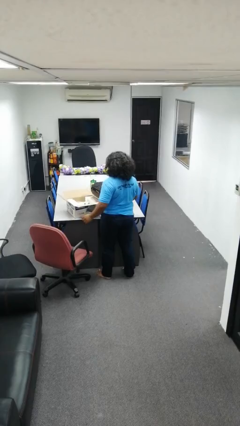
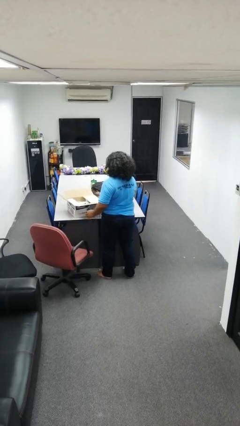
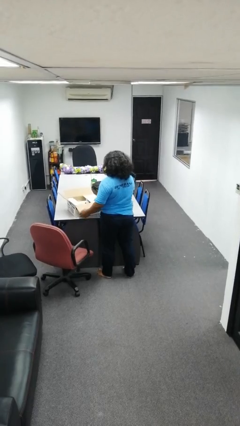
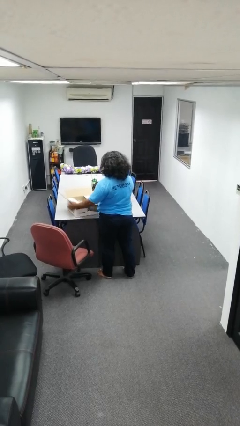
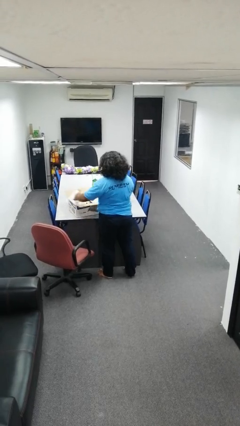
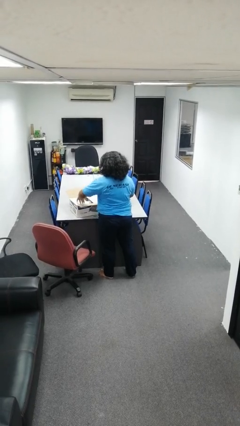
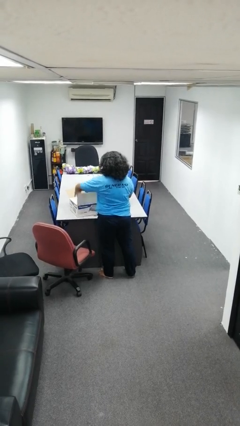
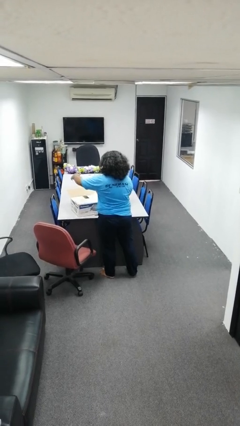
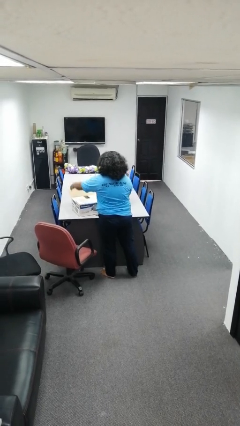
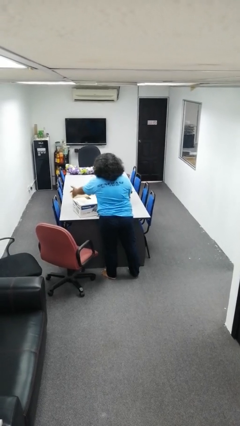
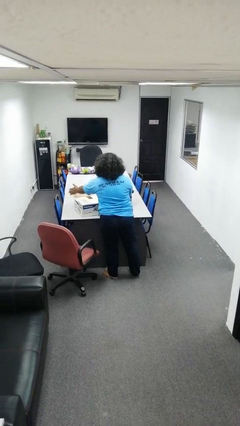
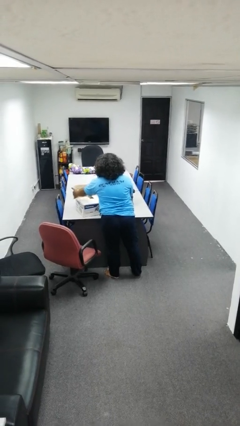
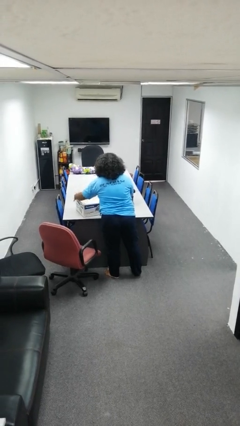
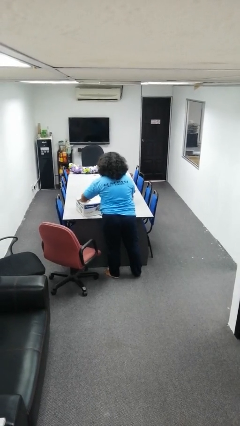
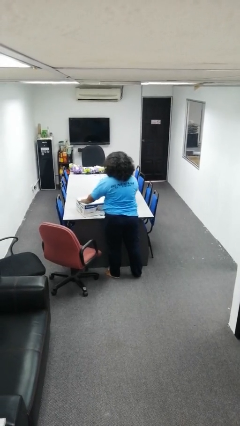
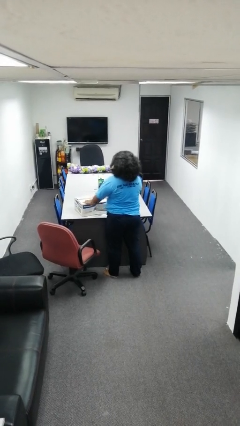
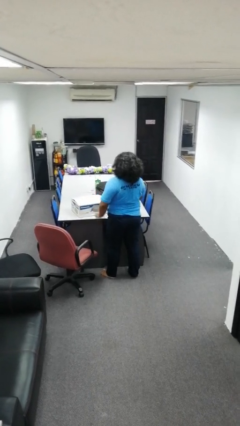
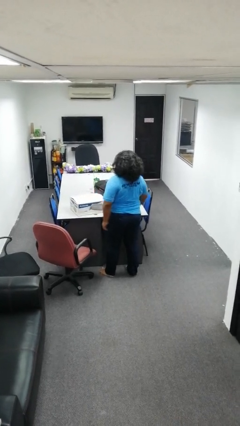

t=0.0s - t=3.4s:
person closes box

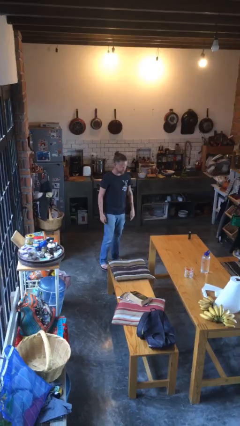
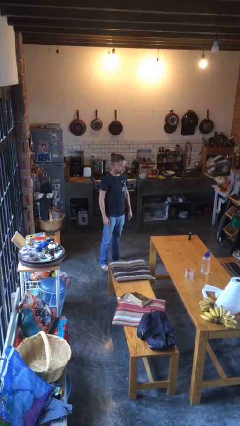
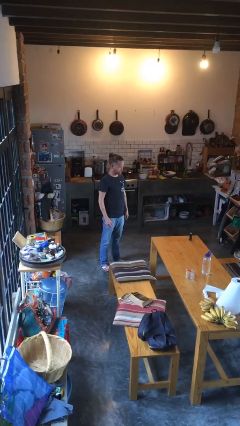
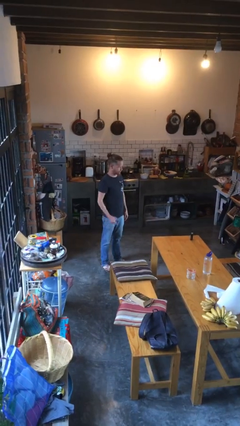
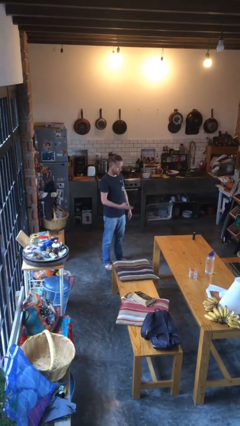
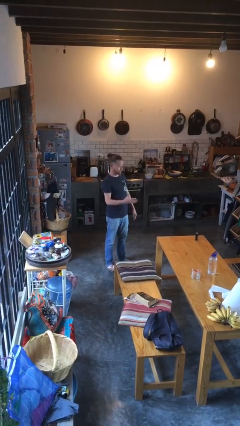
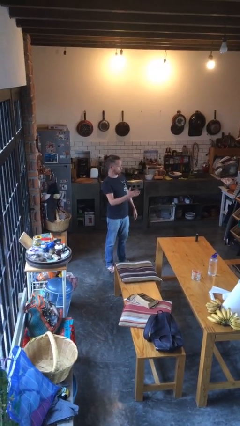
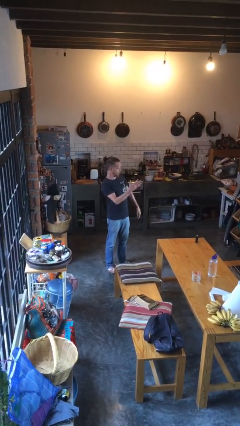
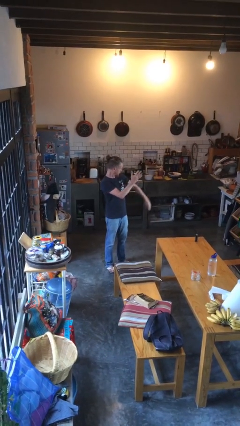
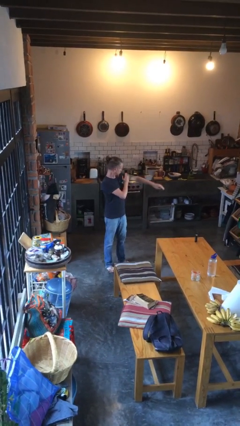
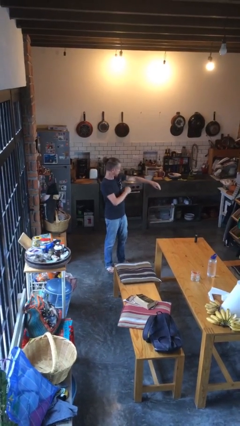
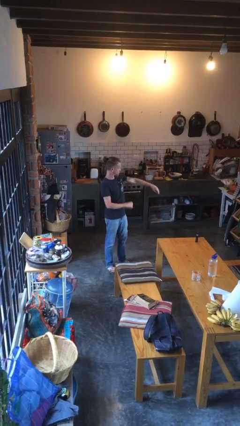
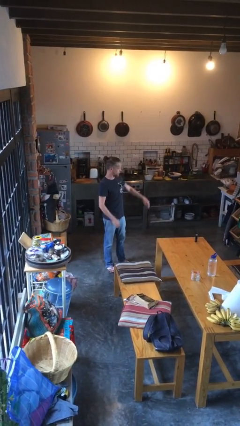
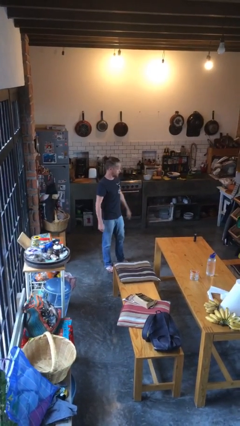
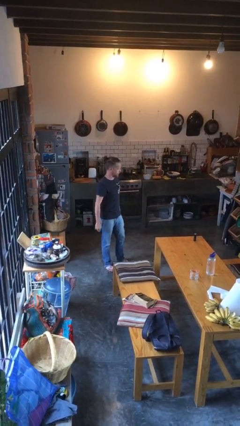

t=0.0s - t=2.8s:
person swats bug

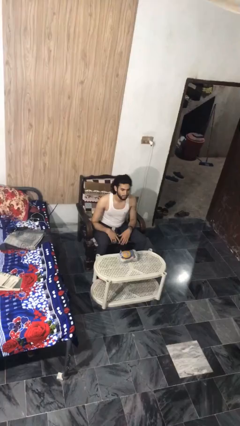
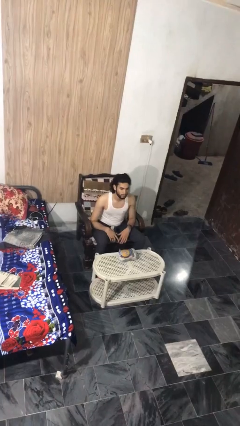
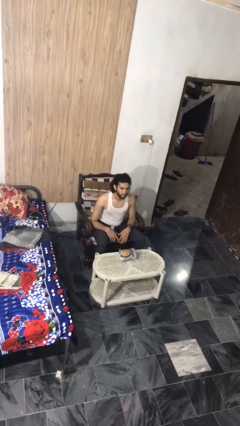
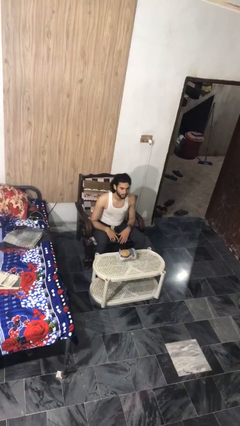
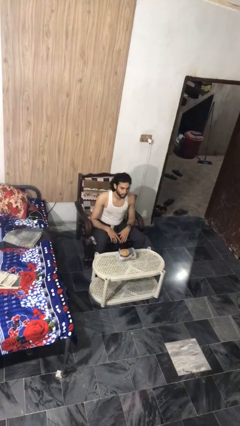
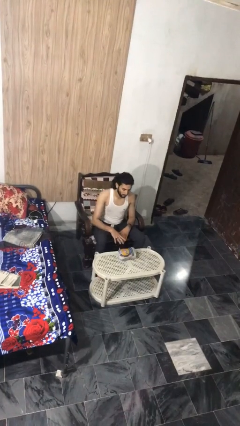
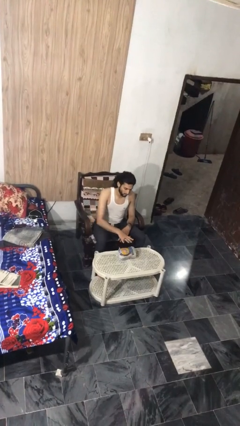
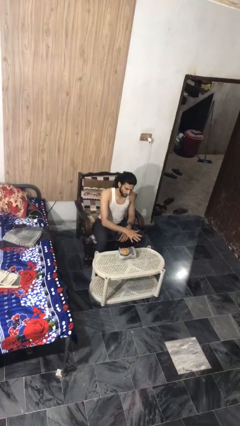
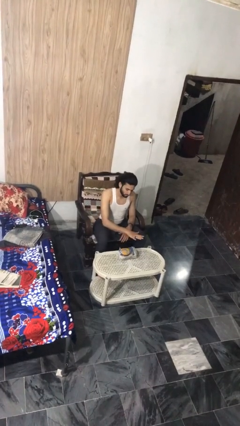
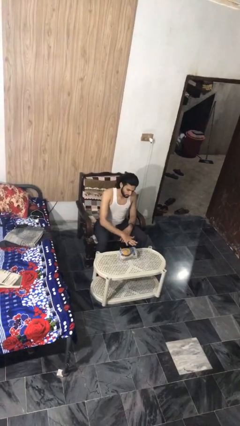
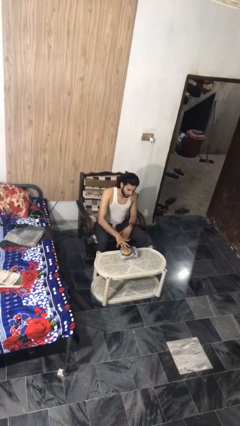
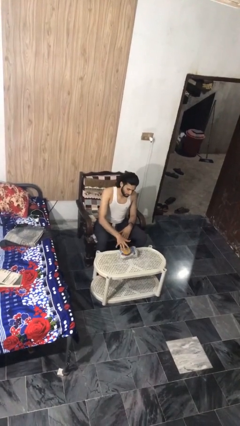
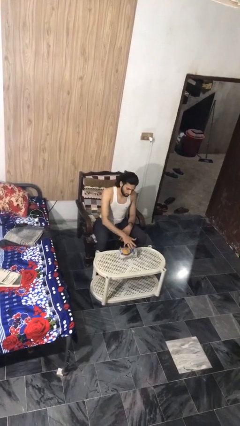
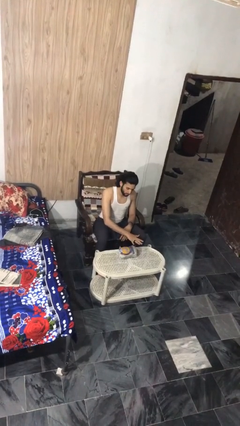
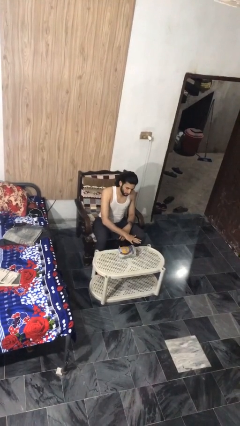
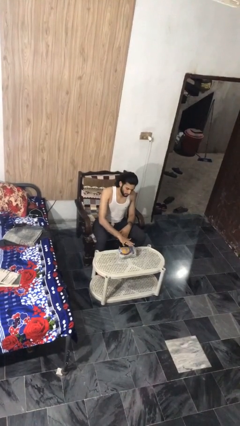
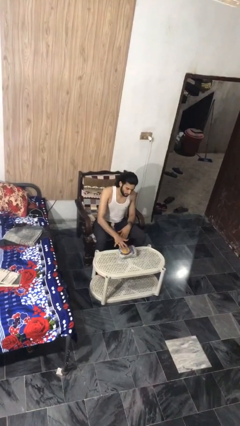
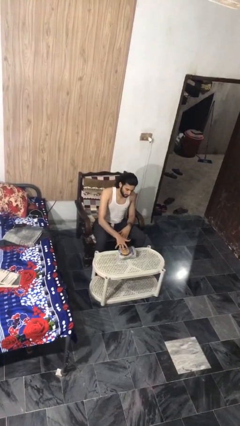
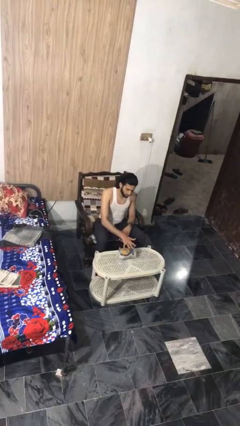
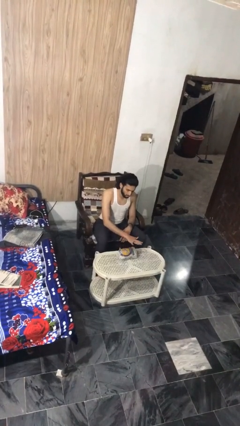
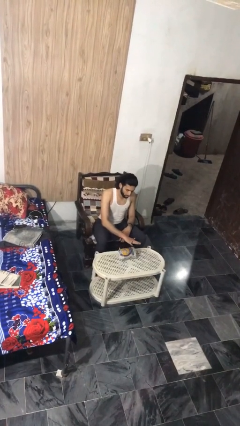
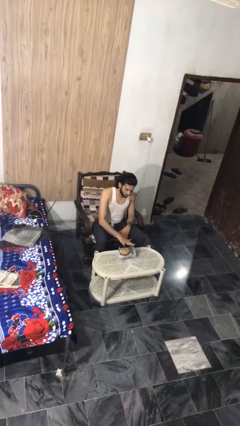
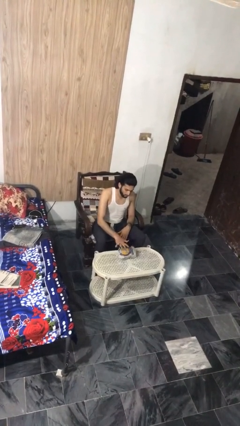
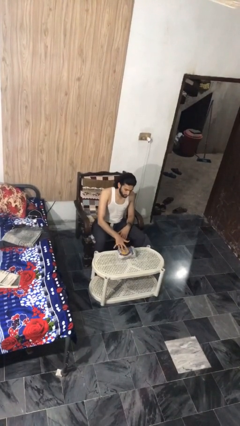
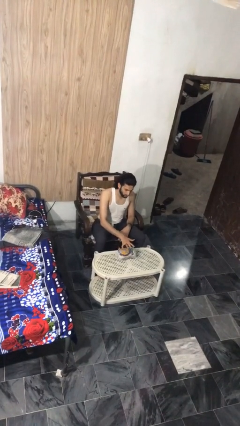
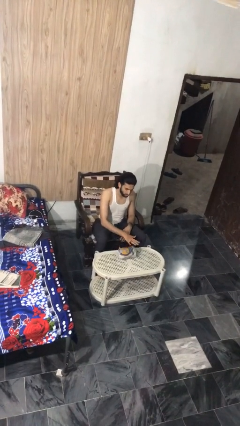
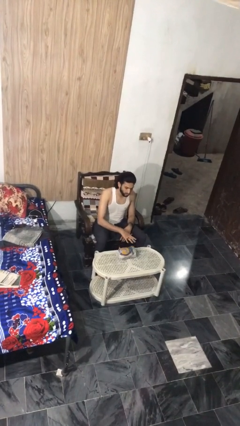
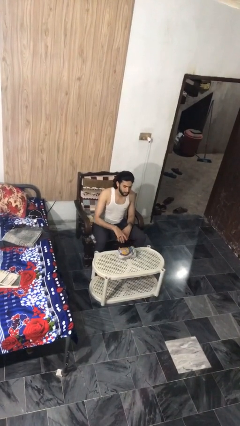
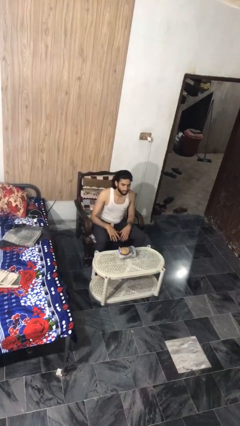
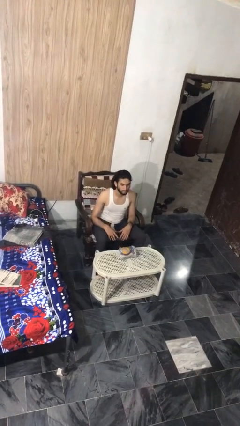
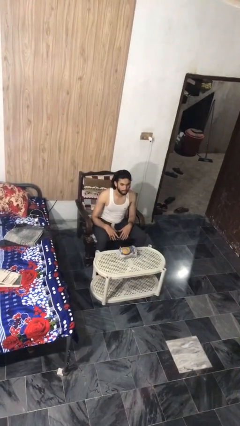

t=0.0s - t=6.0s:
person waves hand over object

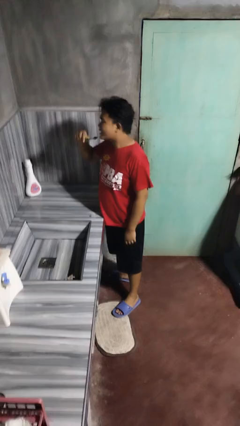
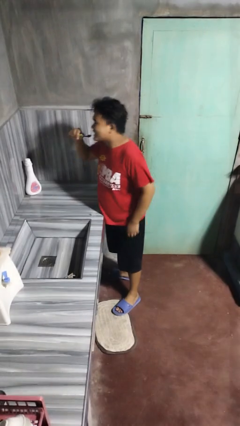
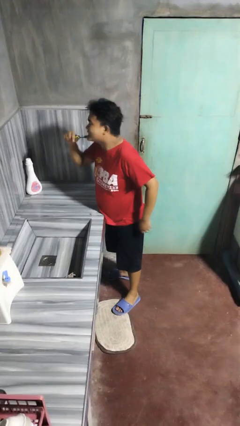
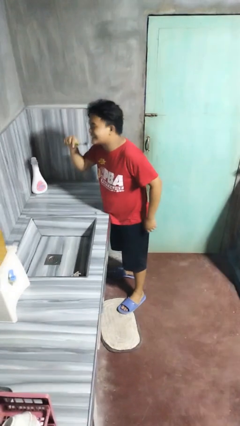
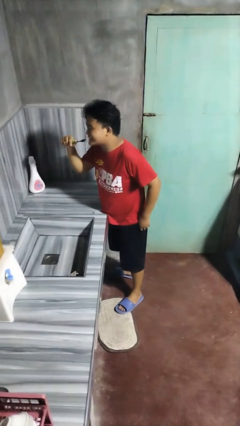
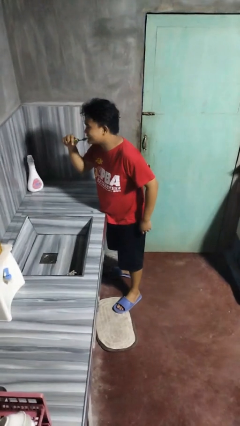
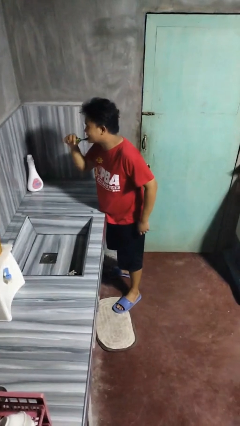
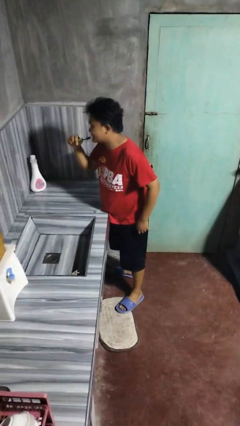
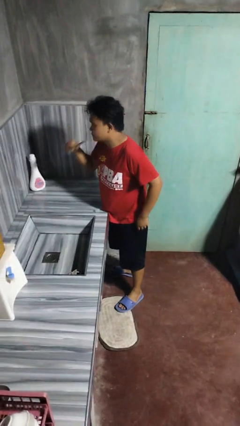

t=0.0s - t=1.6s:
person brushes teeth

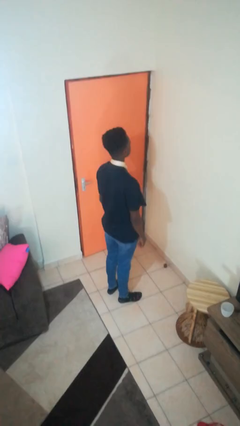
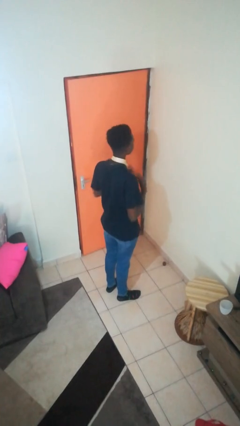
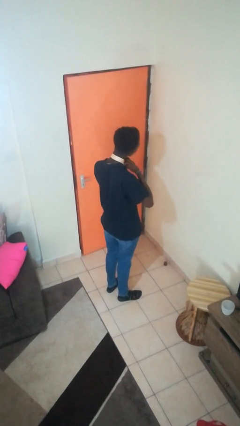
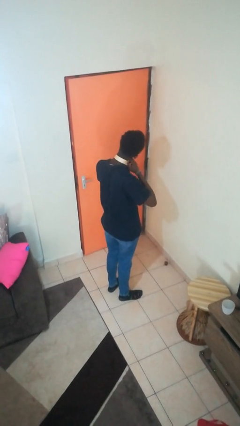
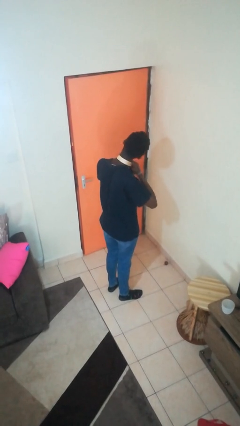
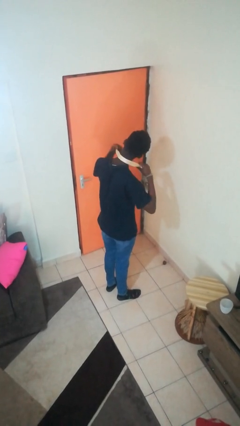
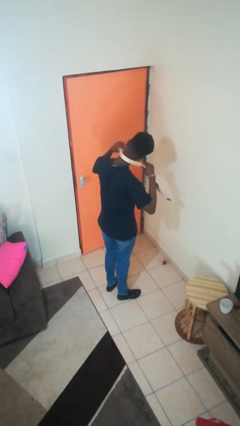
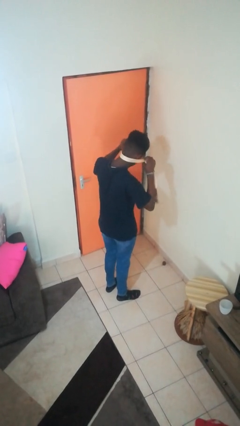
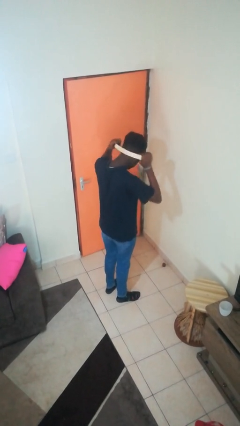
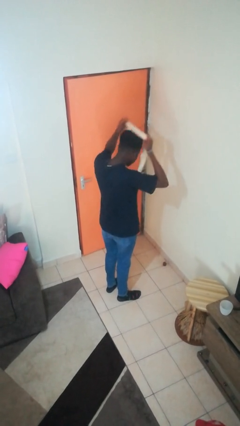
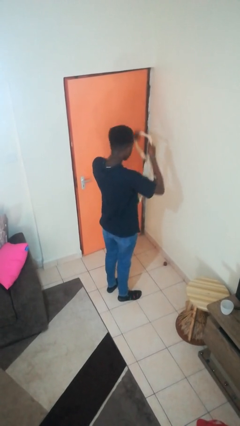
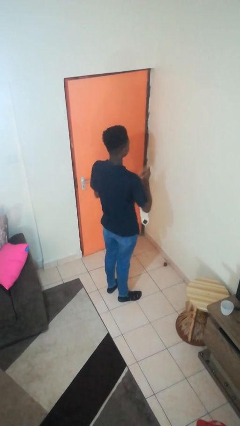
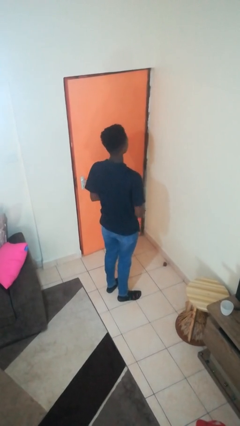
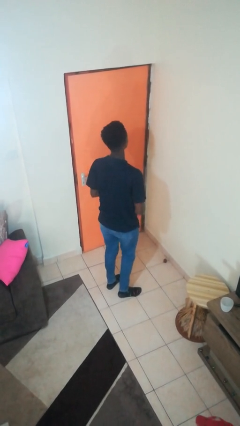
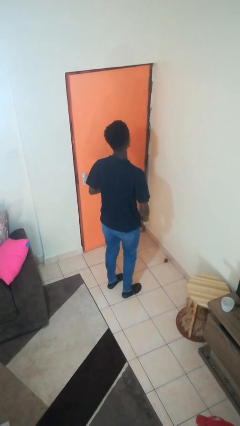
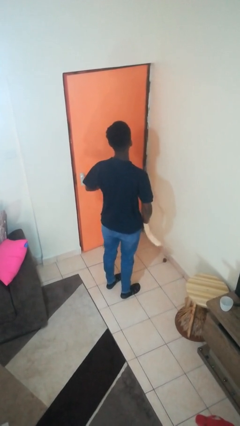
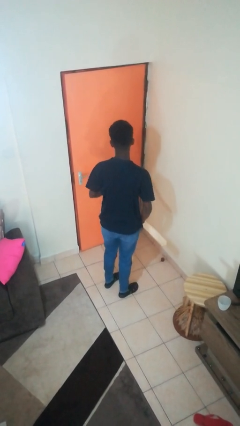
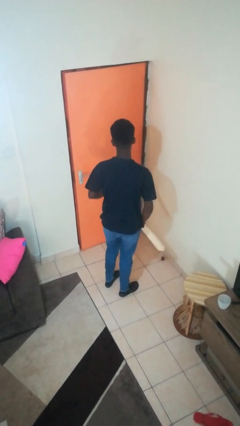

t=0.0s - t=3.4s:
person takes off necktie

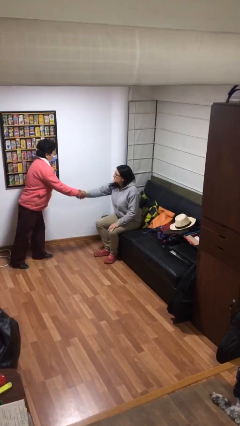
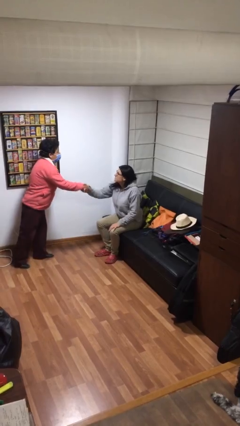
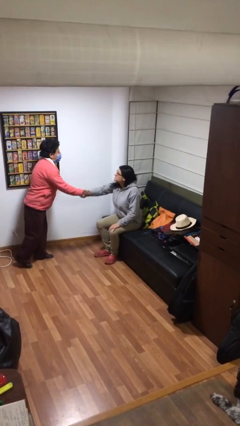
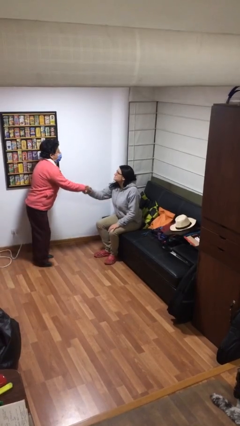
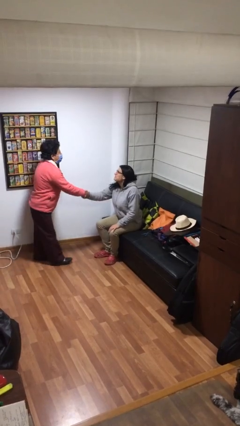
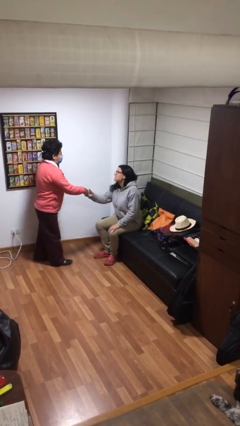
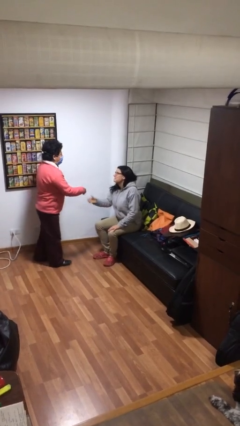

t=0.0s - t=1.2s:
person shakes hand
